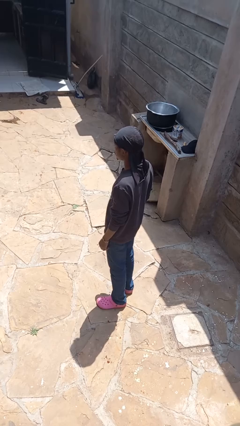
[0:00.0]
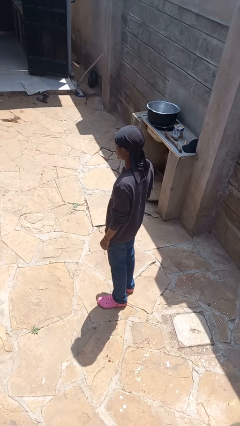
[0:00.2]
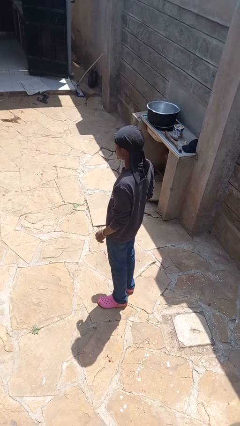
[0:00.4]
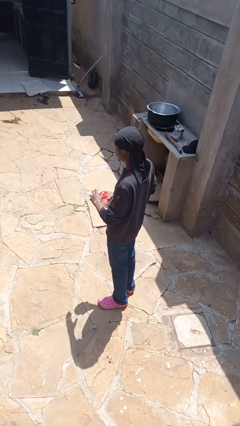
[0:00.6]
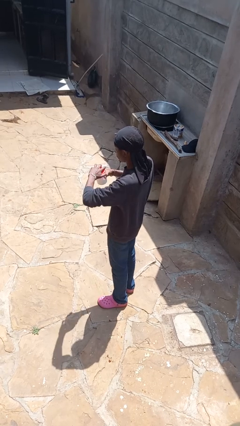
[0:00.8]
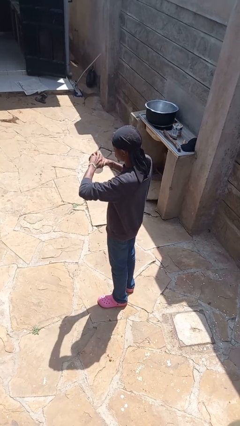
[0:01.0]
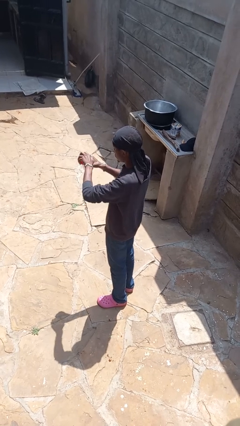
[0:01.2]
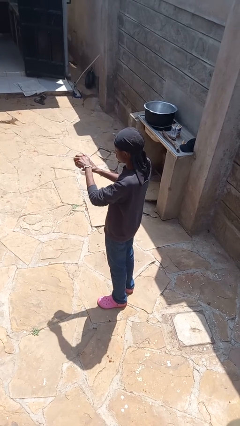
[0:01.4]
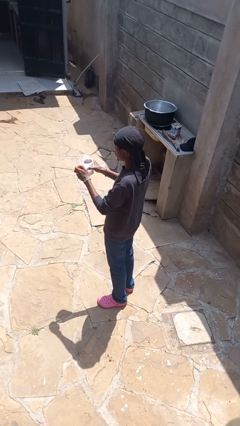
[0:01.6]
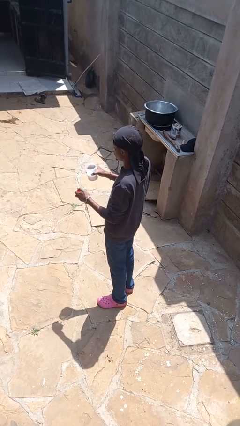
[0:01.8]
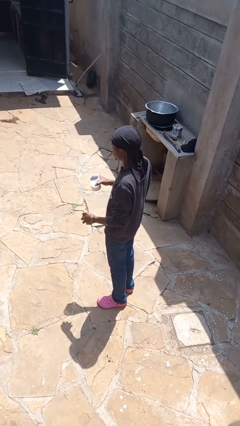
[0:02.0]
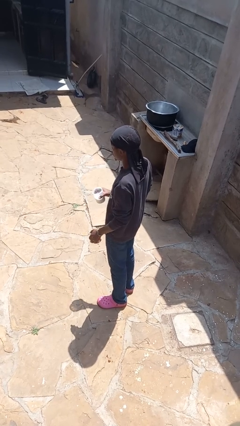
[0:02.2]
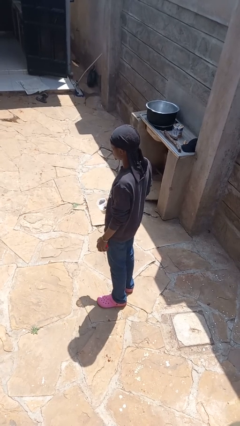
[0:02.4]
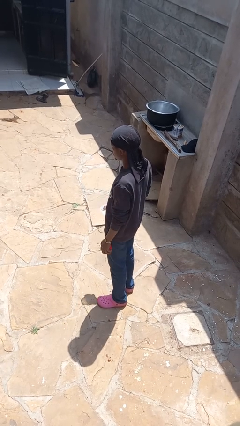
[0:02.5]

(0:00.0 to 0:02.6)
person opens jar

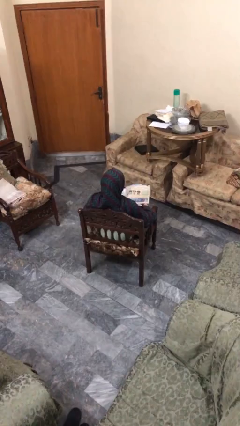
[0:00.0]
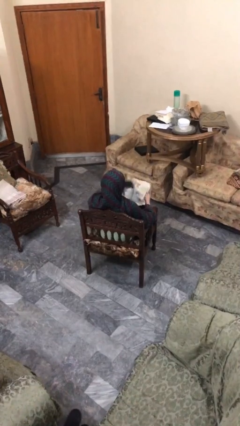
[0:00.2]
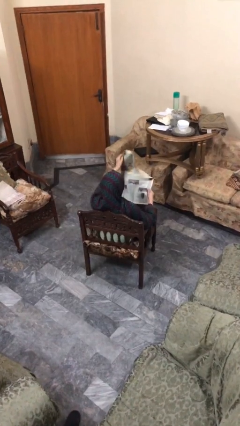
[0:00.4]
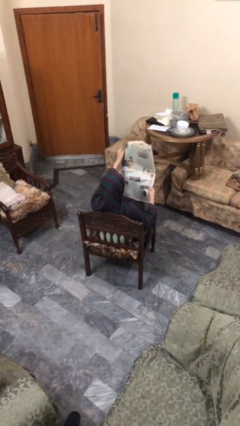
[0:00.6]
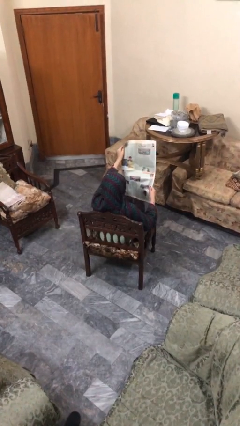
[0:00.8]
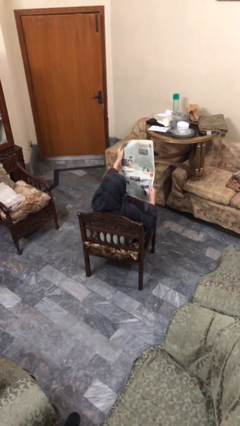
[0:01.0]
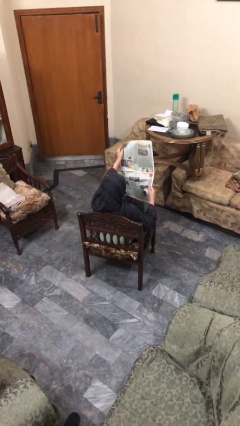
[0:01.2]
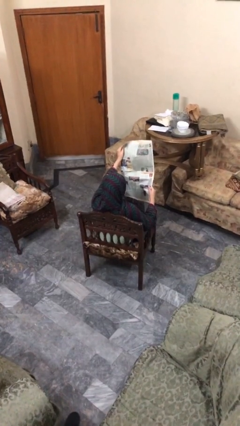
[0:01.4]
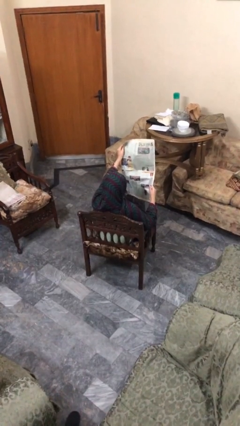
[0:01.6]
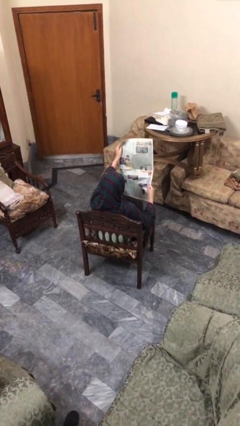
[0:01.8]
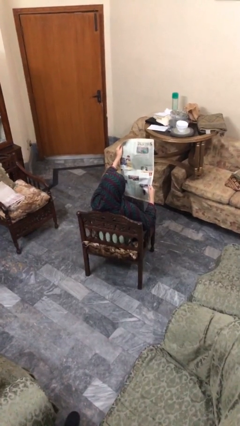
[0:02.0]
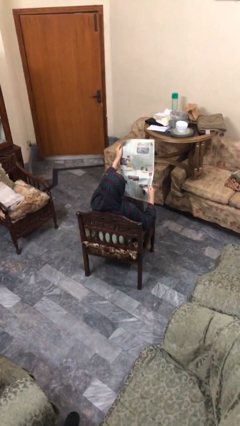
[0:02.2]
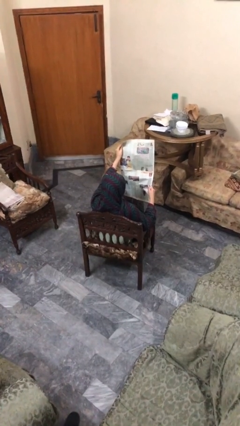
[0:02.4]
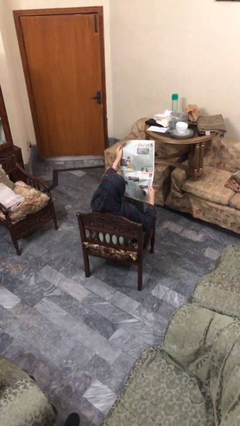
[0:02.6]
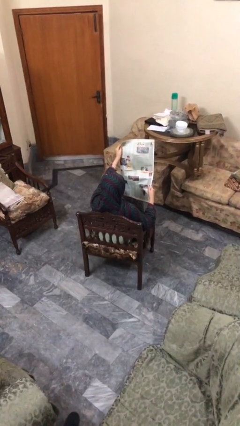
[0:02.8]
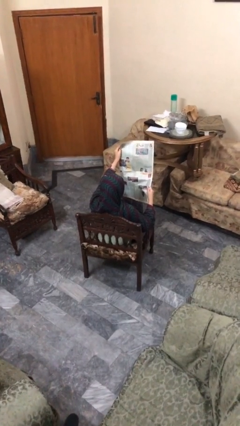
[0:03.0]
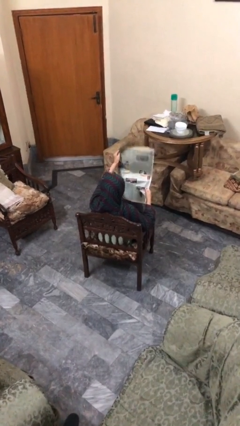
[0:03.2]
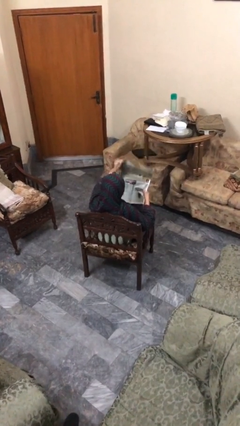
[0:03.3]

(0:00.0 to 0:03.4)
person reads newspaper

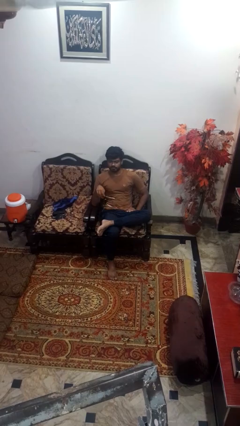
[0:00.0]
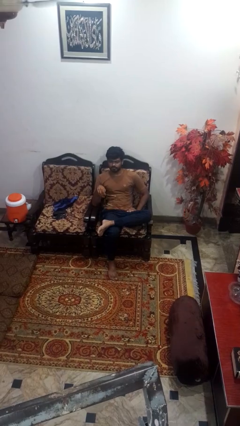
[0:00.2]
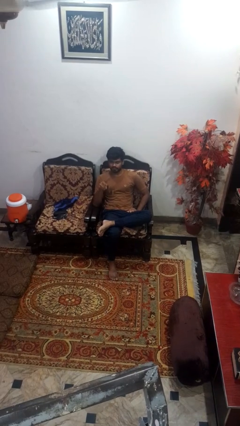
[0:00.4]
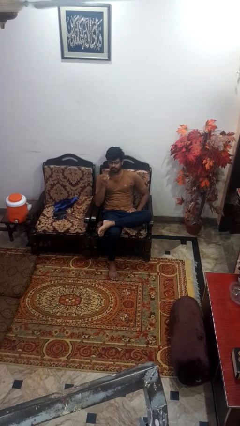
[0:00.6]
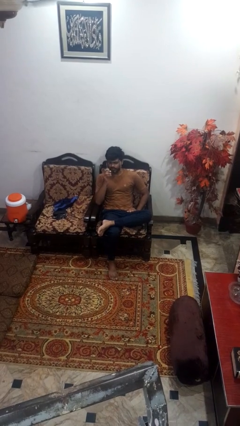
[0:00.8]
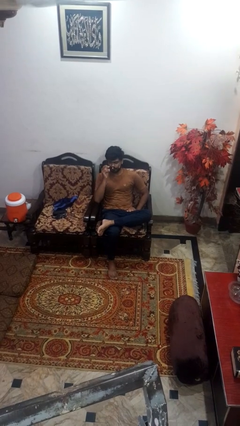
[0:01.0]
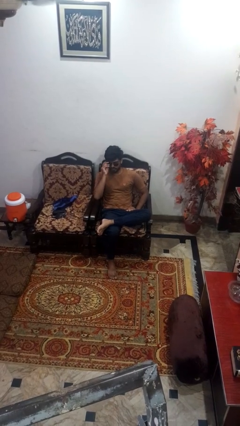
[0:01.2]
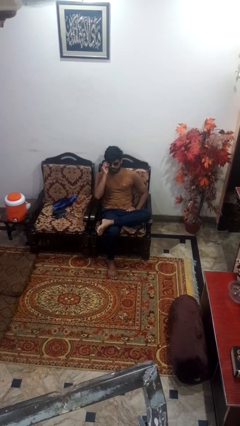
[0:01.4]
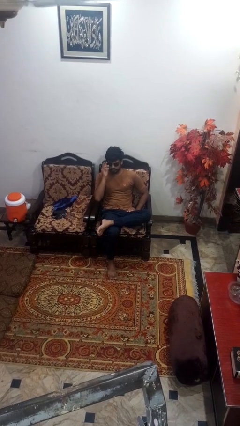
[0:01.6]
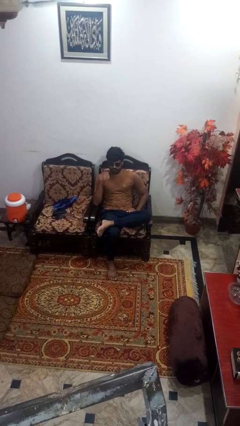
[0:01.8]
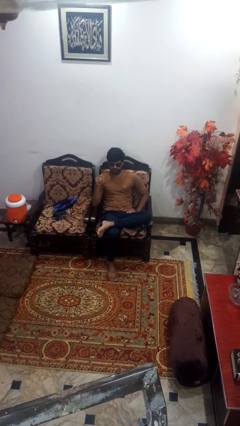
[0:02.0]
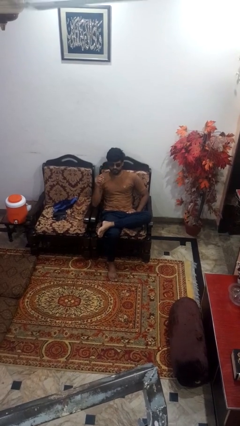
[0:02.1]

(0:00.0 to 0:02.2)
person puts on sunglasses

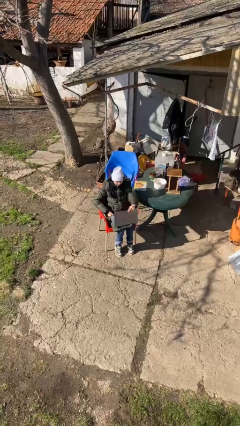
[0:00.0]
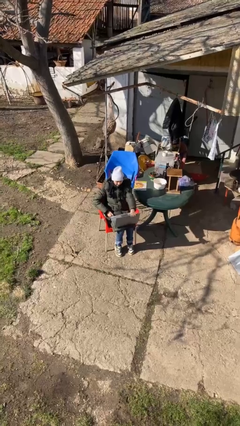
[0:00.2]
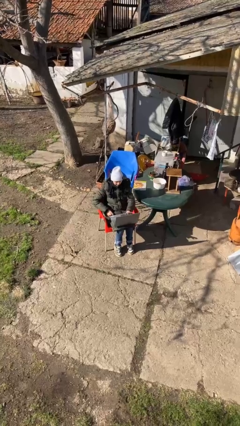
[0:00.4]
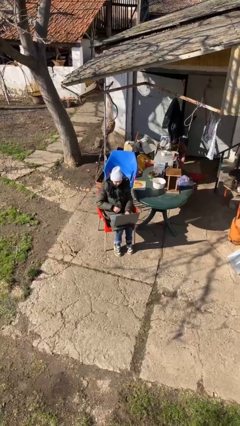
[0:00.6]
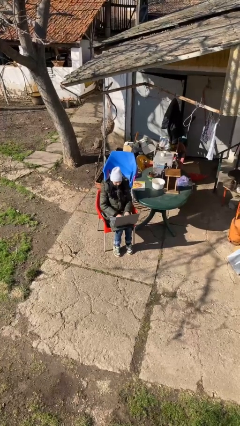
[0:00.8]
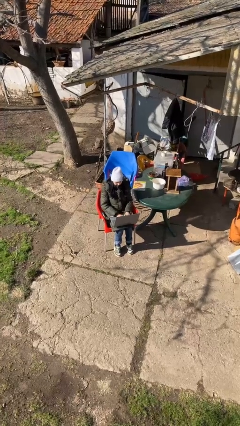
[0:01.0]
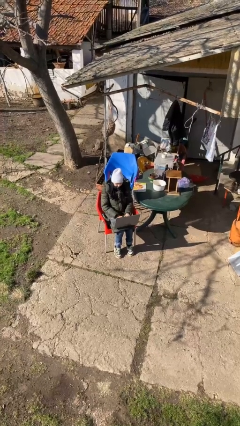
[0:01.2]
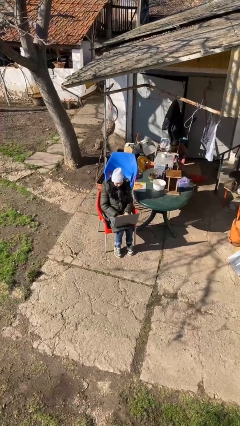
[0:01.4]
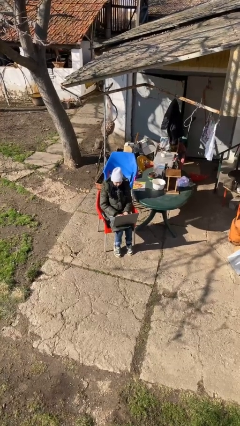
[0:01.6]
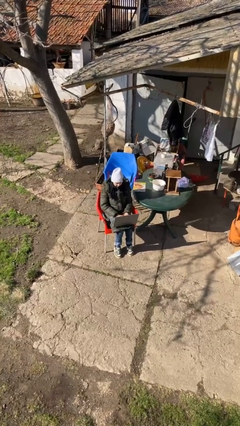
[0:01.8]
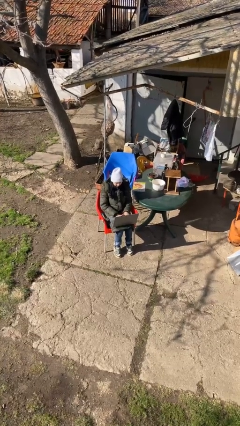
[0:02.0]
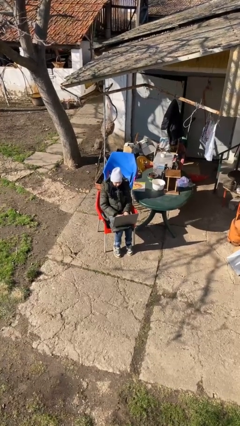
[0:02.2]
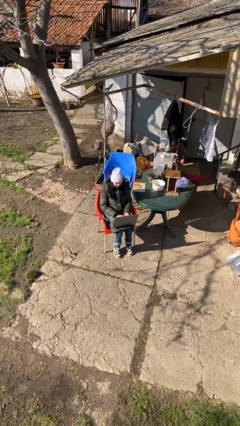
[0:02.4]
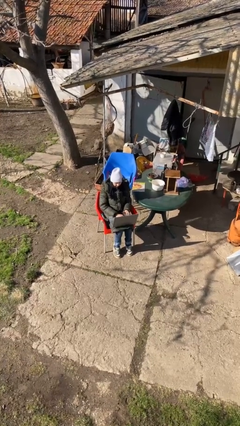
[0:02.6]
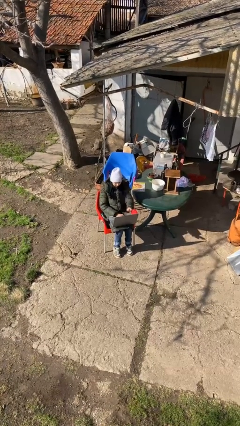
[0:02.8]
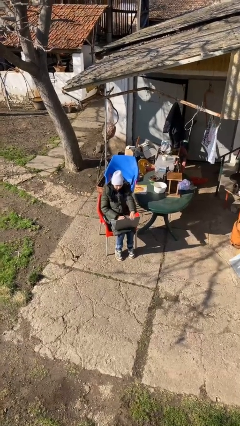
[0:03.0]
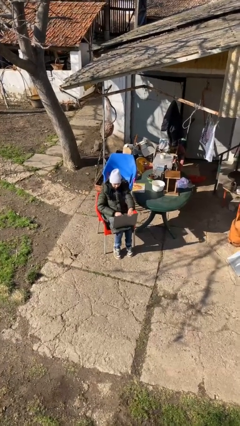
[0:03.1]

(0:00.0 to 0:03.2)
person interacts with laptop

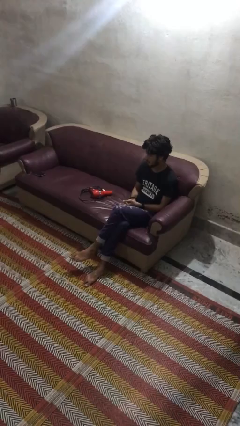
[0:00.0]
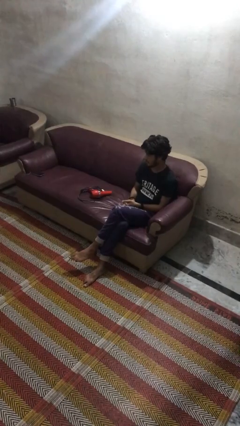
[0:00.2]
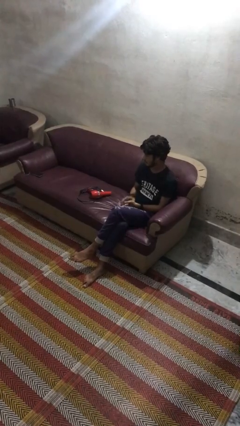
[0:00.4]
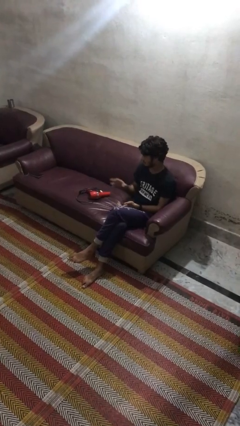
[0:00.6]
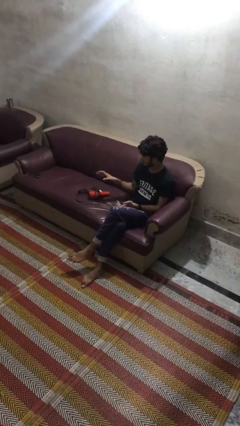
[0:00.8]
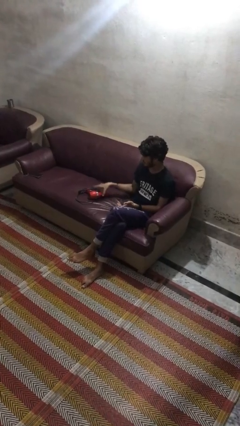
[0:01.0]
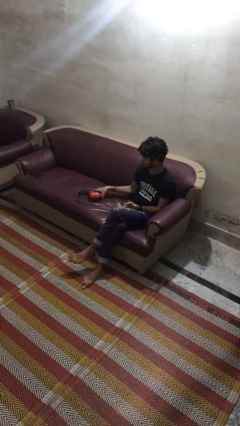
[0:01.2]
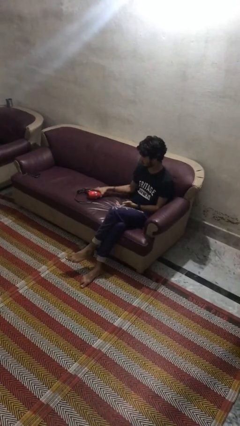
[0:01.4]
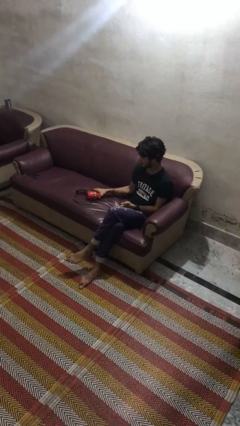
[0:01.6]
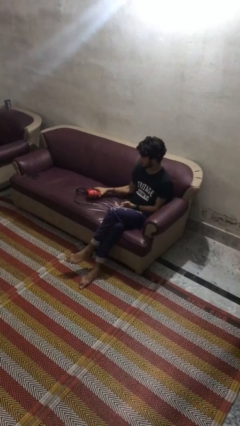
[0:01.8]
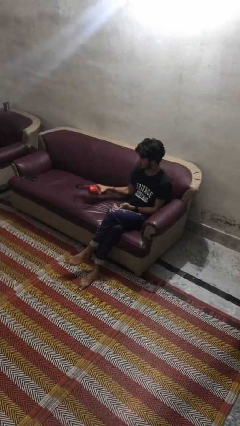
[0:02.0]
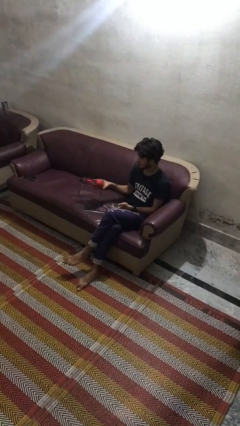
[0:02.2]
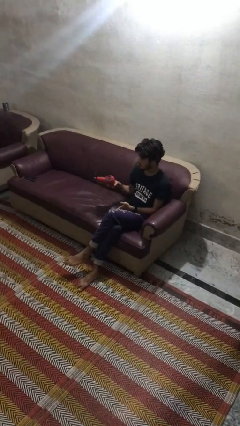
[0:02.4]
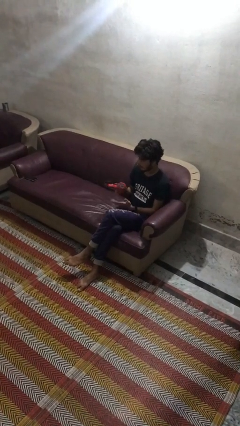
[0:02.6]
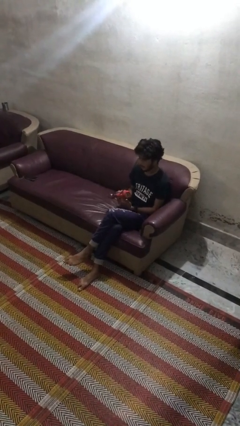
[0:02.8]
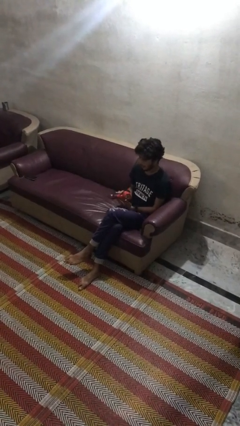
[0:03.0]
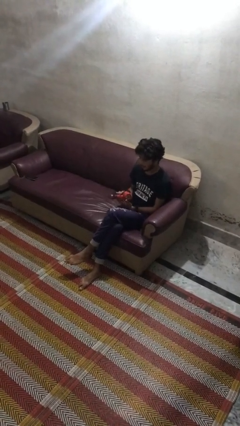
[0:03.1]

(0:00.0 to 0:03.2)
person picks up object from couch

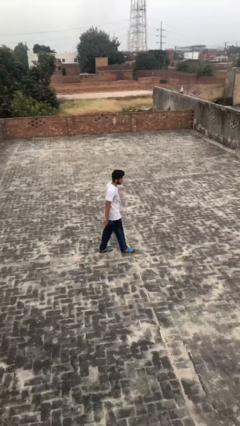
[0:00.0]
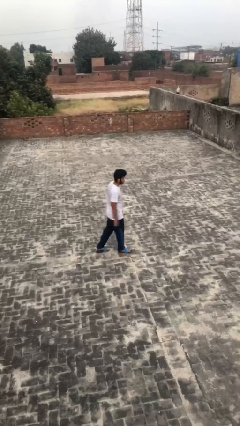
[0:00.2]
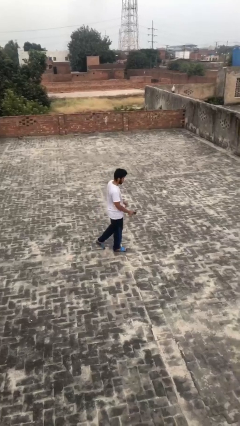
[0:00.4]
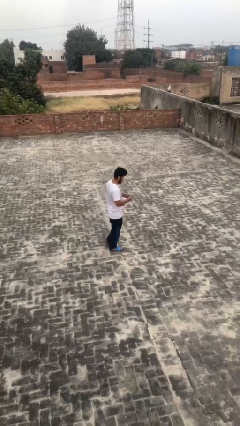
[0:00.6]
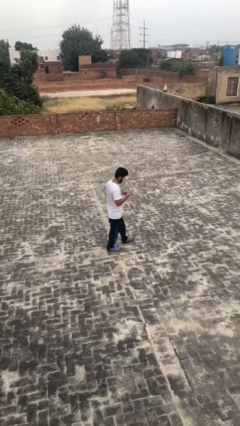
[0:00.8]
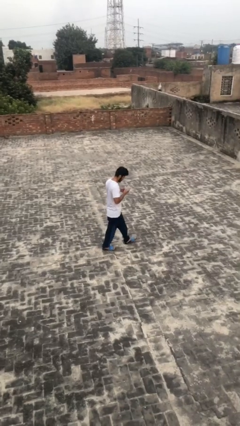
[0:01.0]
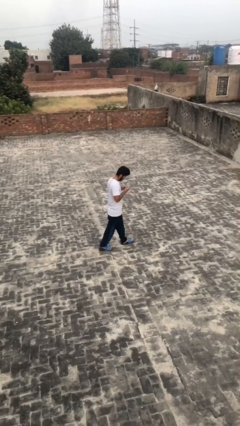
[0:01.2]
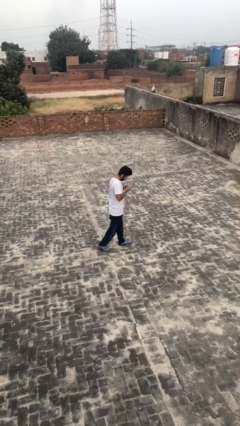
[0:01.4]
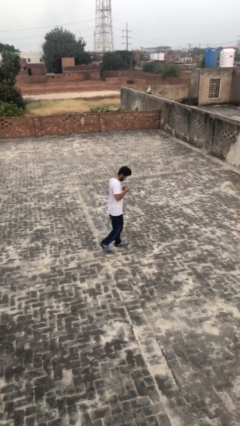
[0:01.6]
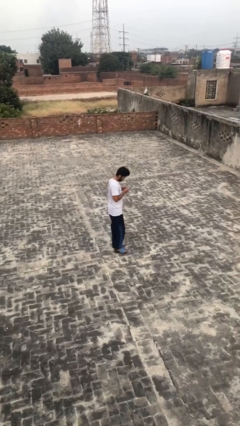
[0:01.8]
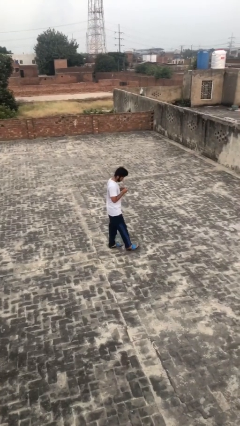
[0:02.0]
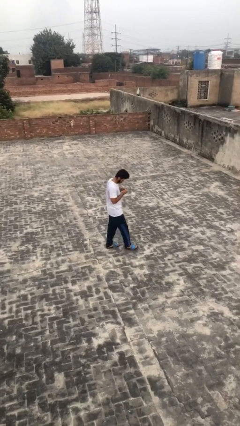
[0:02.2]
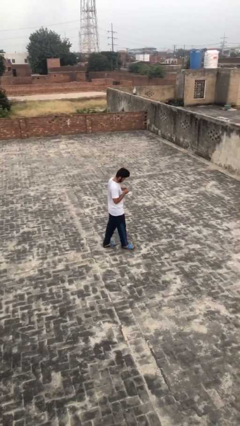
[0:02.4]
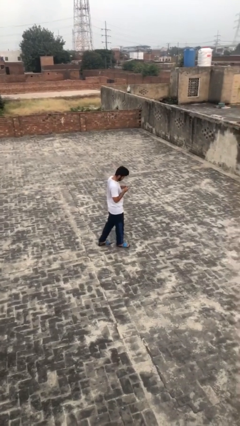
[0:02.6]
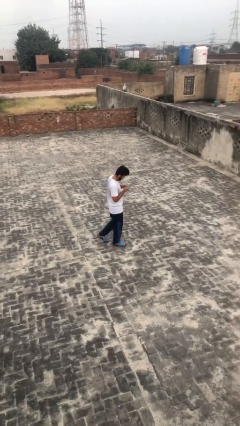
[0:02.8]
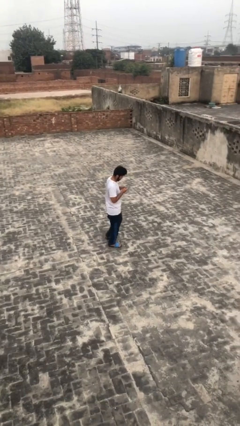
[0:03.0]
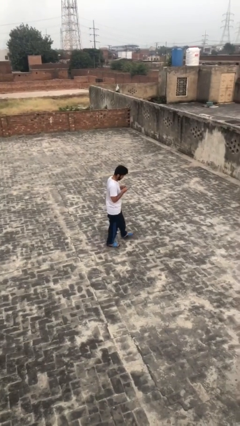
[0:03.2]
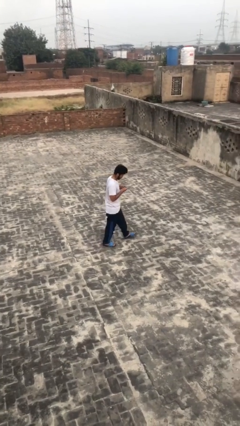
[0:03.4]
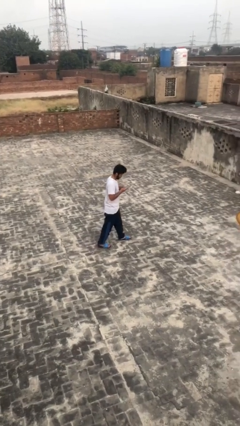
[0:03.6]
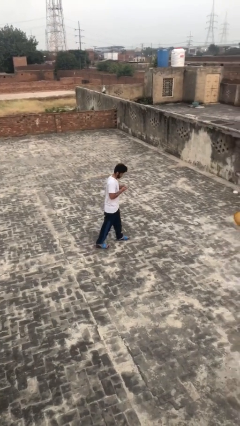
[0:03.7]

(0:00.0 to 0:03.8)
person texts on phone
